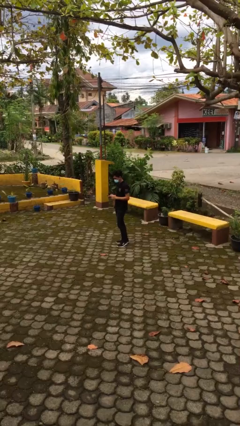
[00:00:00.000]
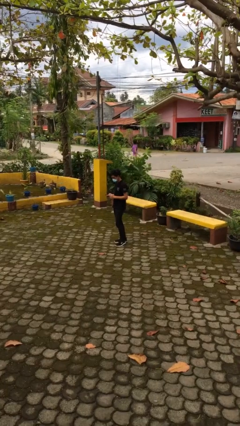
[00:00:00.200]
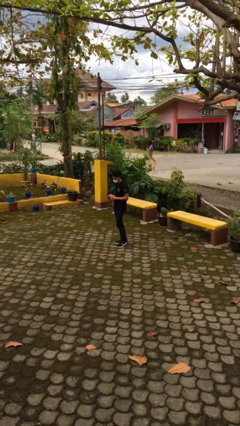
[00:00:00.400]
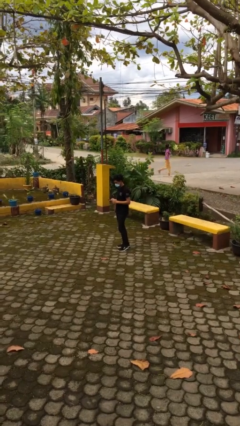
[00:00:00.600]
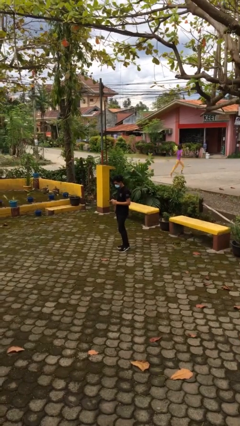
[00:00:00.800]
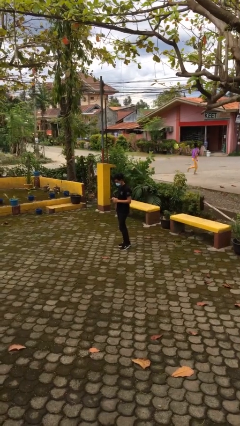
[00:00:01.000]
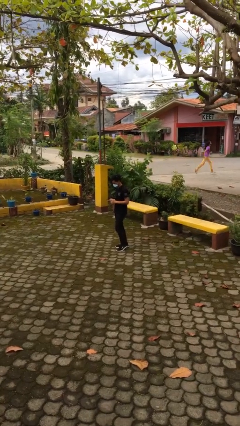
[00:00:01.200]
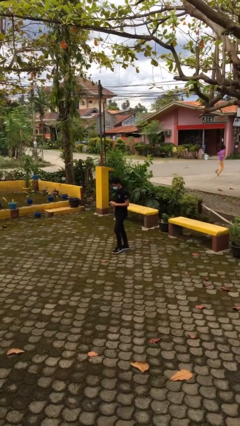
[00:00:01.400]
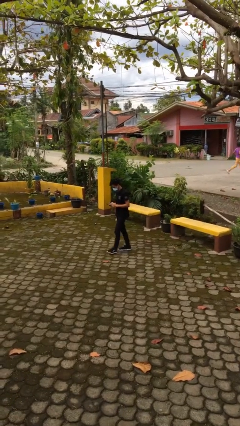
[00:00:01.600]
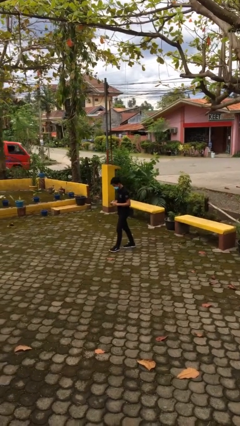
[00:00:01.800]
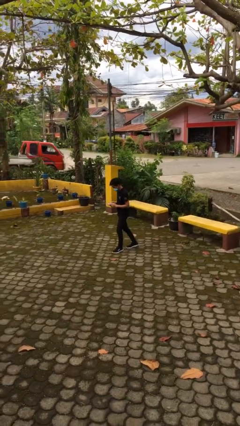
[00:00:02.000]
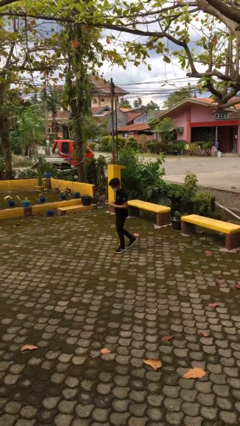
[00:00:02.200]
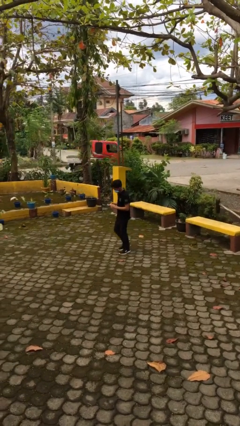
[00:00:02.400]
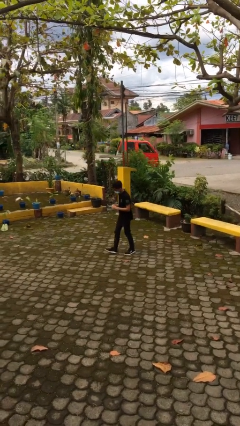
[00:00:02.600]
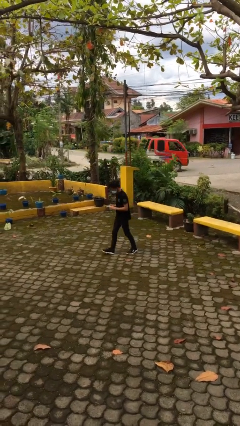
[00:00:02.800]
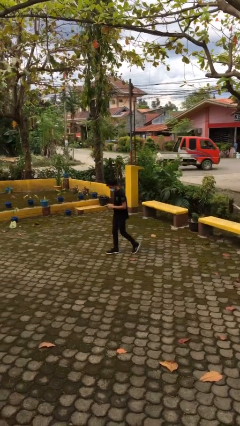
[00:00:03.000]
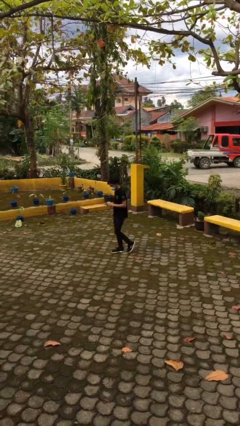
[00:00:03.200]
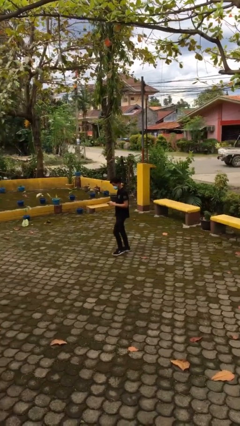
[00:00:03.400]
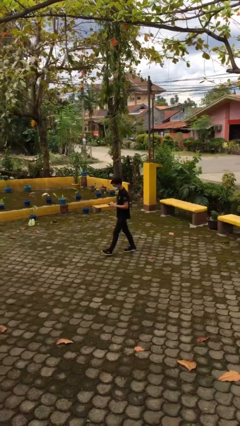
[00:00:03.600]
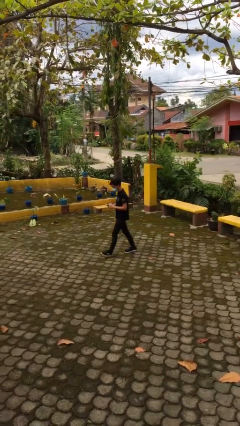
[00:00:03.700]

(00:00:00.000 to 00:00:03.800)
person texts on phone

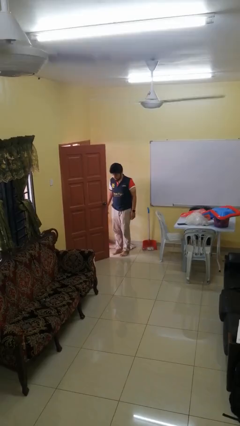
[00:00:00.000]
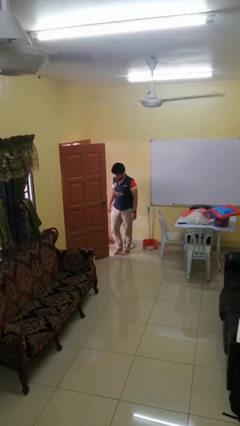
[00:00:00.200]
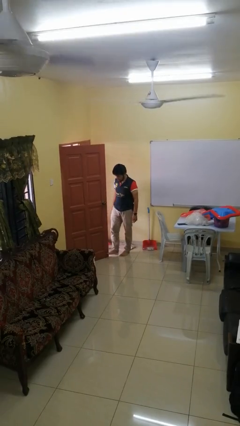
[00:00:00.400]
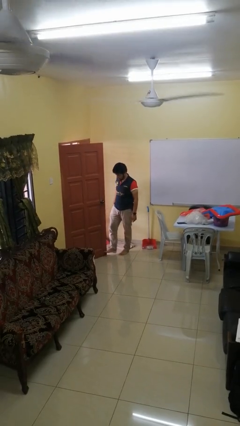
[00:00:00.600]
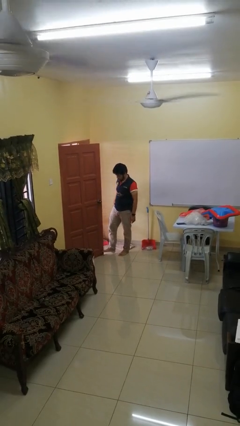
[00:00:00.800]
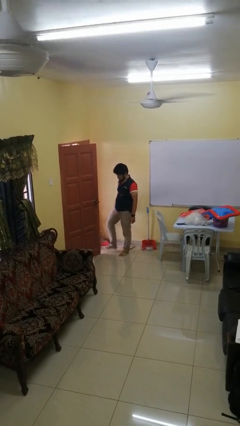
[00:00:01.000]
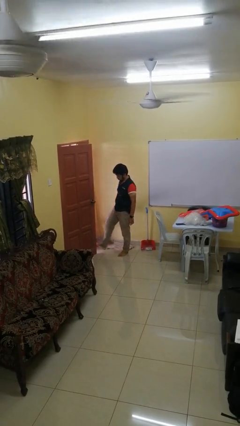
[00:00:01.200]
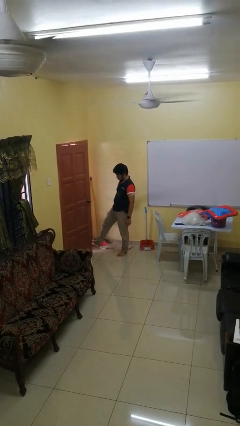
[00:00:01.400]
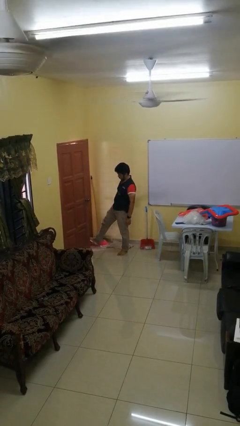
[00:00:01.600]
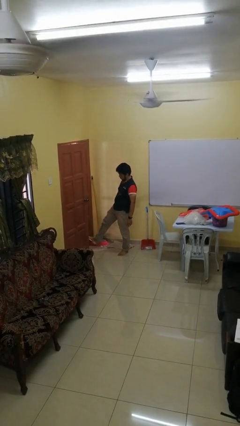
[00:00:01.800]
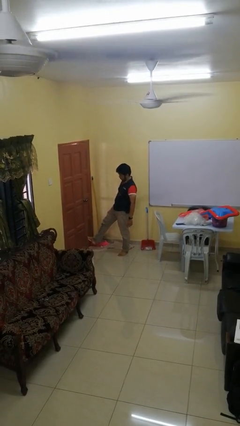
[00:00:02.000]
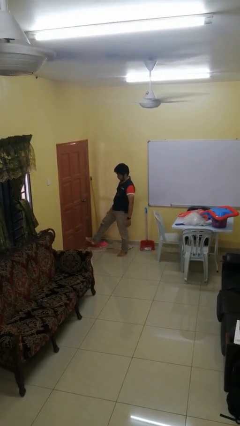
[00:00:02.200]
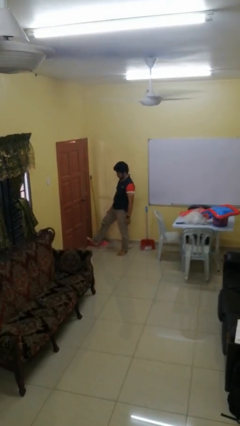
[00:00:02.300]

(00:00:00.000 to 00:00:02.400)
person closes door with foot

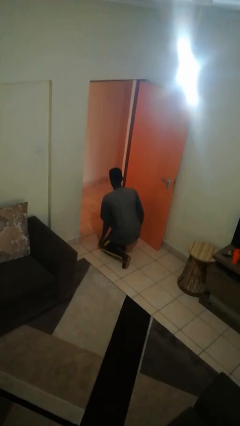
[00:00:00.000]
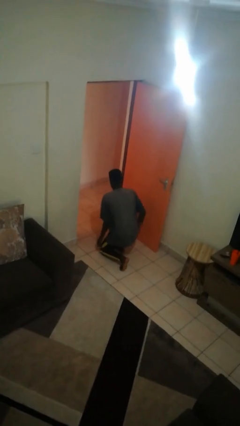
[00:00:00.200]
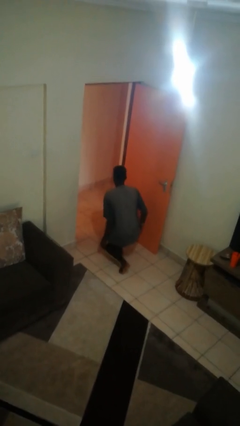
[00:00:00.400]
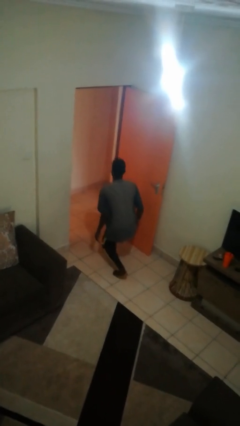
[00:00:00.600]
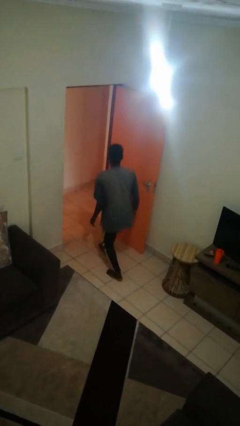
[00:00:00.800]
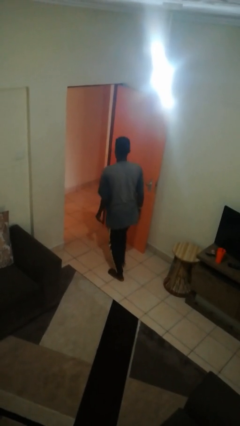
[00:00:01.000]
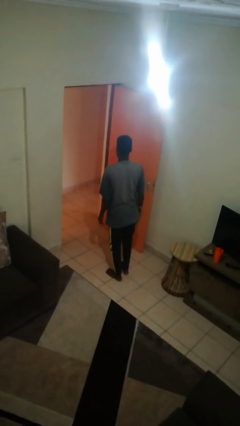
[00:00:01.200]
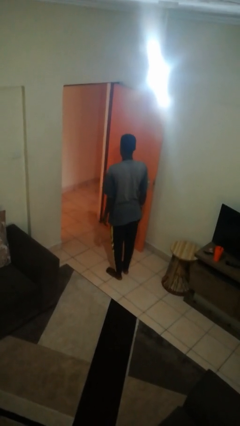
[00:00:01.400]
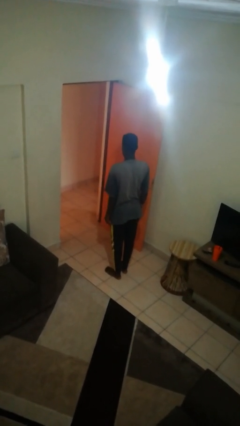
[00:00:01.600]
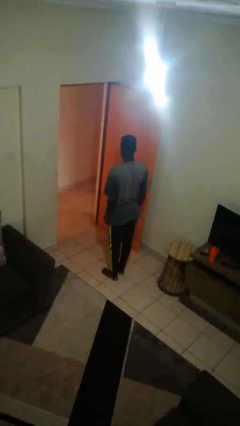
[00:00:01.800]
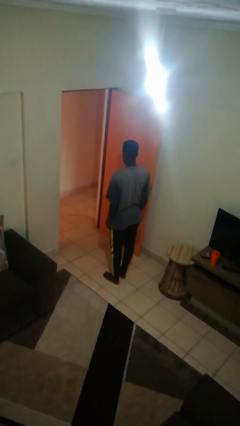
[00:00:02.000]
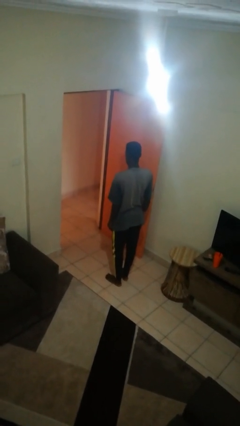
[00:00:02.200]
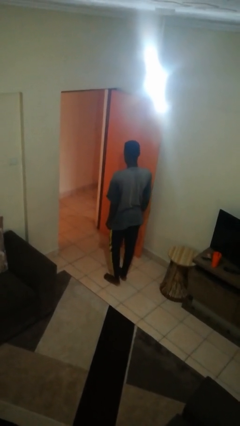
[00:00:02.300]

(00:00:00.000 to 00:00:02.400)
person stands up from floor

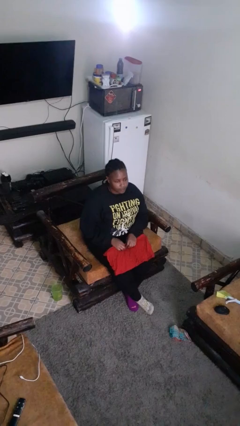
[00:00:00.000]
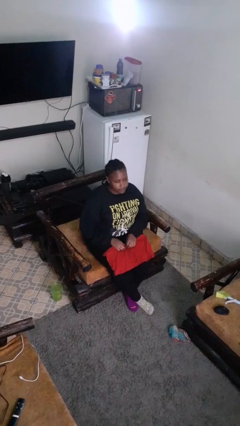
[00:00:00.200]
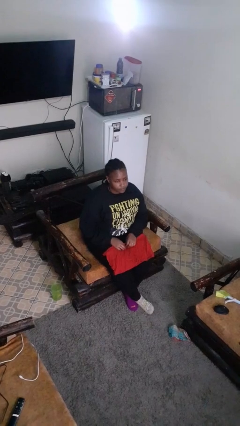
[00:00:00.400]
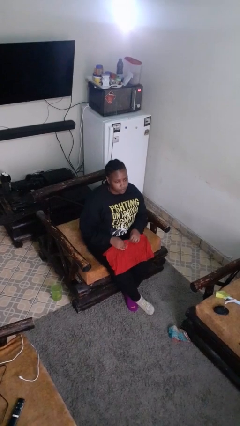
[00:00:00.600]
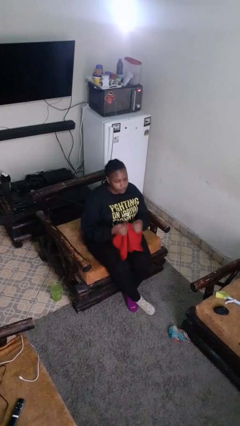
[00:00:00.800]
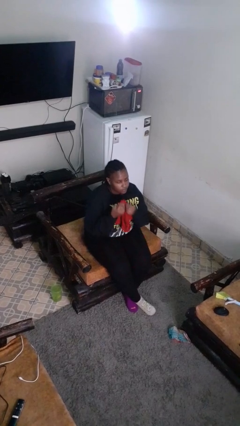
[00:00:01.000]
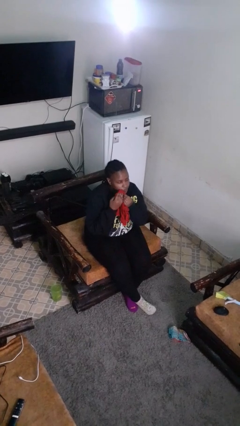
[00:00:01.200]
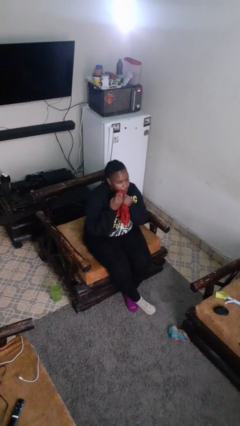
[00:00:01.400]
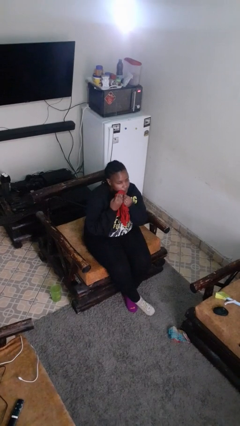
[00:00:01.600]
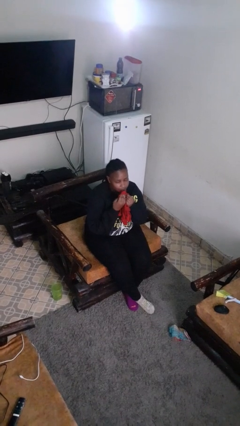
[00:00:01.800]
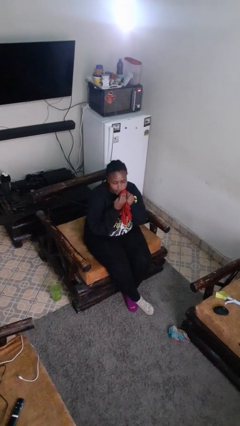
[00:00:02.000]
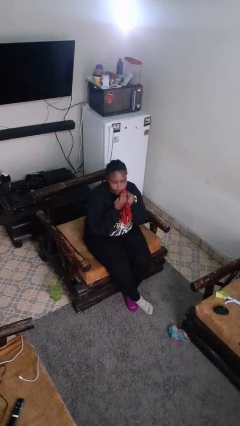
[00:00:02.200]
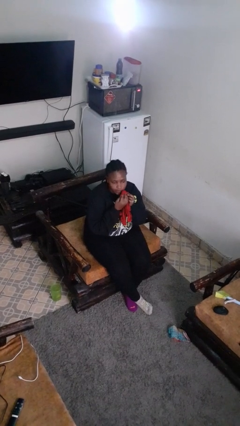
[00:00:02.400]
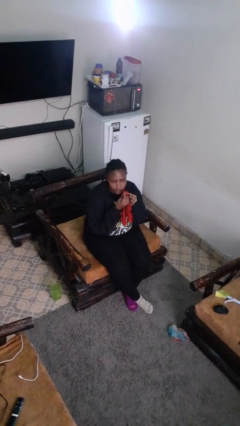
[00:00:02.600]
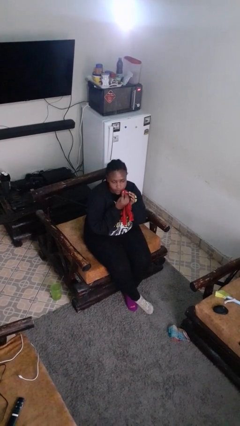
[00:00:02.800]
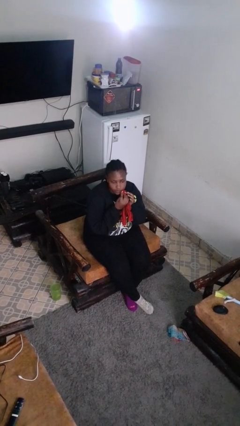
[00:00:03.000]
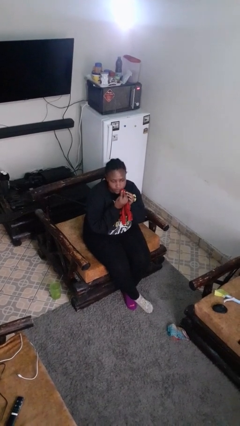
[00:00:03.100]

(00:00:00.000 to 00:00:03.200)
person wipes mouth with napkin

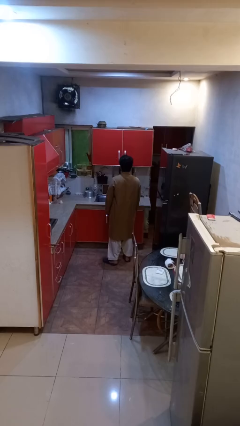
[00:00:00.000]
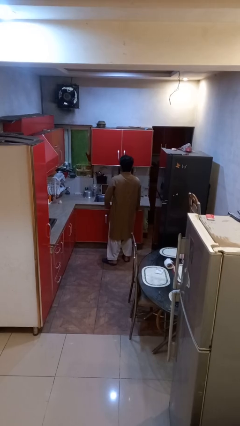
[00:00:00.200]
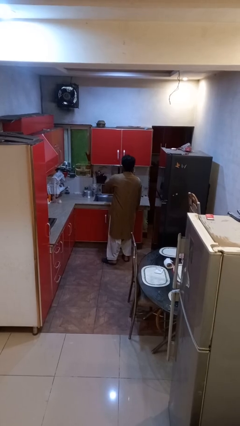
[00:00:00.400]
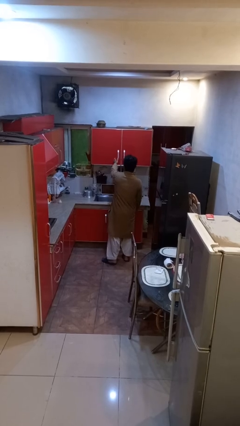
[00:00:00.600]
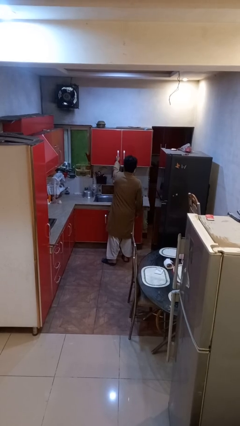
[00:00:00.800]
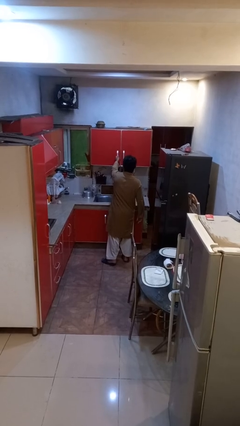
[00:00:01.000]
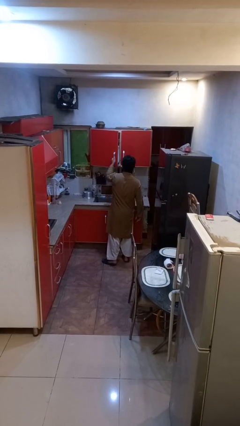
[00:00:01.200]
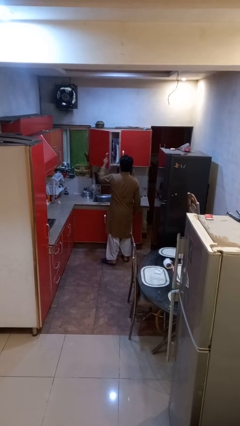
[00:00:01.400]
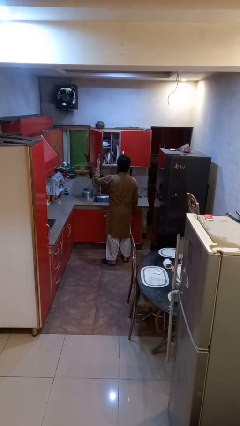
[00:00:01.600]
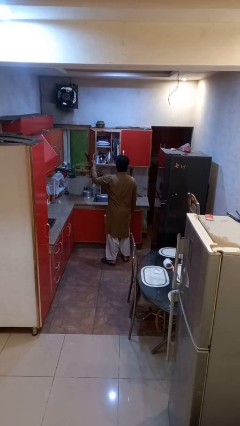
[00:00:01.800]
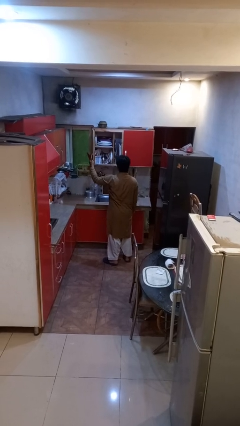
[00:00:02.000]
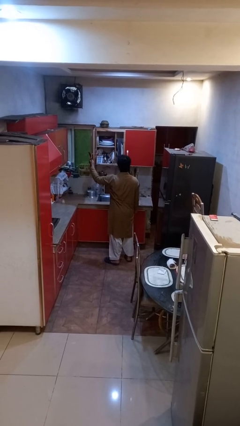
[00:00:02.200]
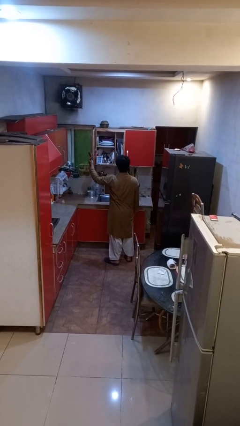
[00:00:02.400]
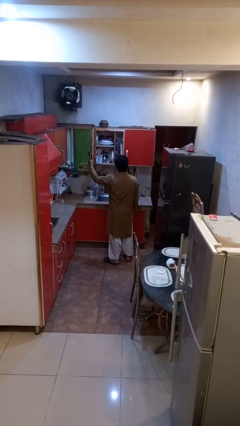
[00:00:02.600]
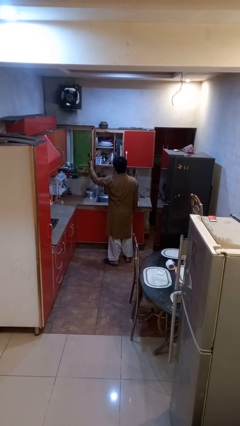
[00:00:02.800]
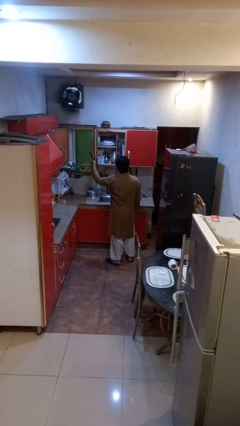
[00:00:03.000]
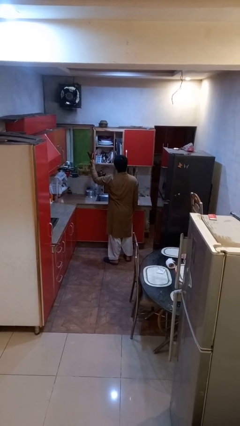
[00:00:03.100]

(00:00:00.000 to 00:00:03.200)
person opens cabinet

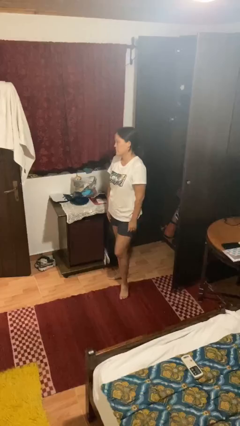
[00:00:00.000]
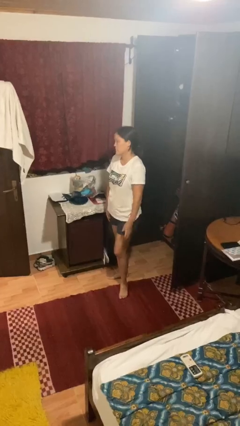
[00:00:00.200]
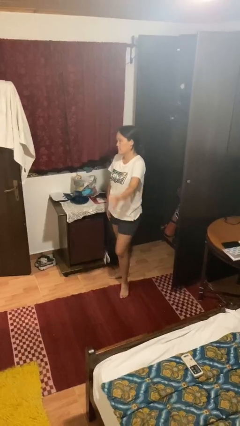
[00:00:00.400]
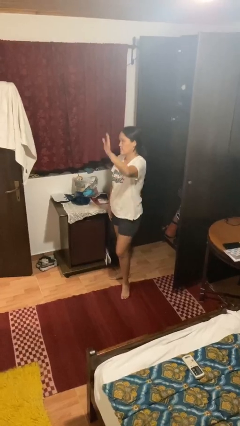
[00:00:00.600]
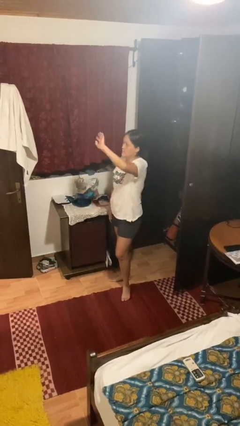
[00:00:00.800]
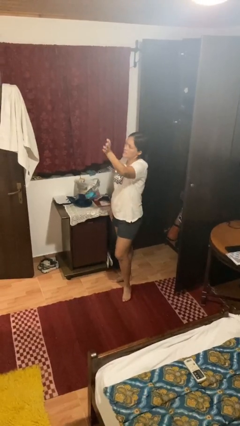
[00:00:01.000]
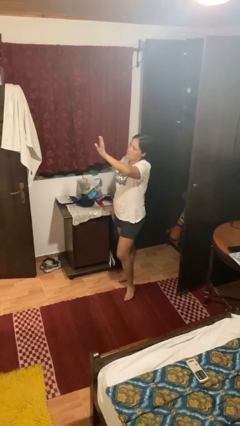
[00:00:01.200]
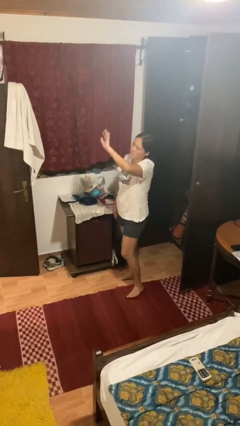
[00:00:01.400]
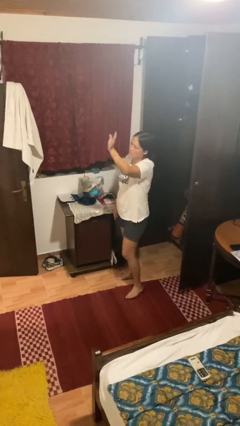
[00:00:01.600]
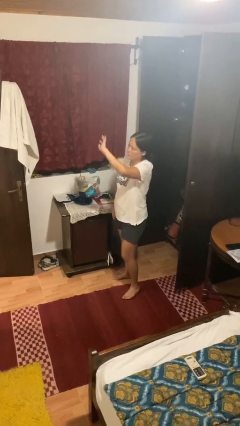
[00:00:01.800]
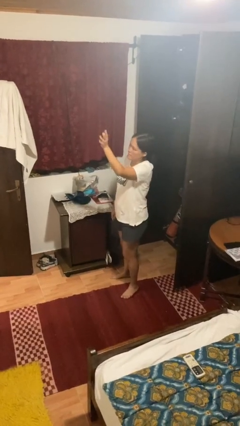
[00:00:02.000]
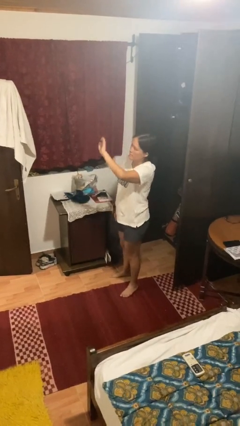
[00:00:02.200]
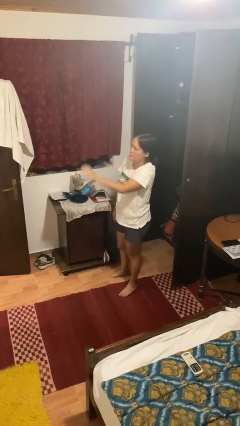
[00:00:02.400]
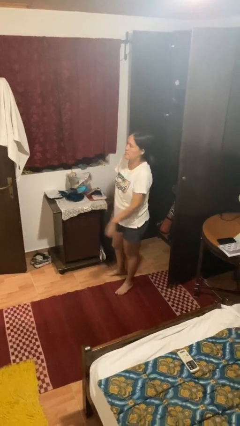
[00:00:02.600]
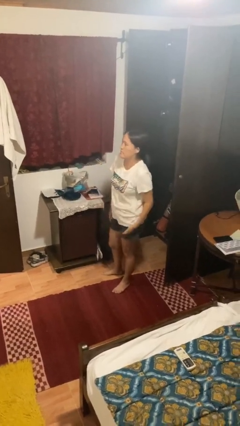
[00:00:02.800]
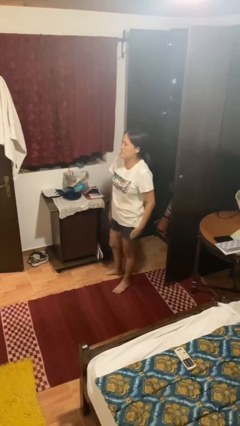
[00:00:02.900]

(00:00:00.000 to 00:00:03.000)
person waves at person
